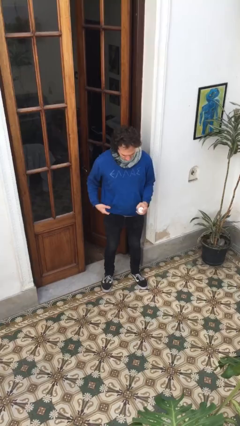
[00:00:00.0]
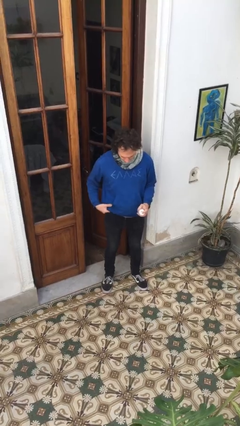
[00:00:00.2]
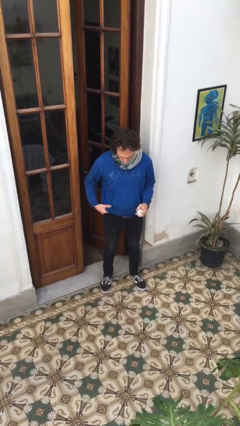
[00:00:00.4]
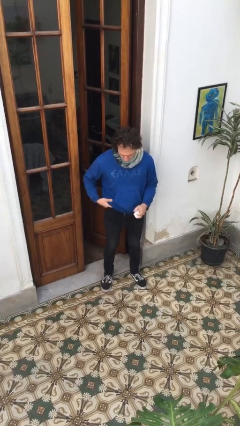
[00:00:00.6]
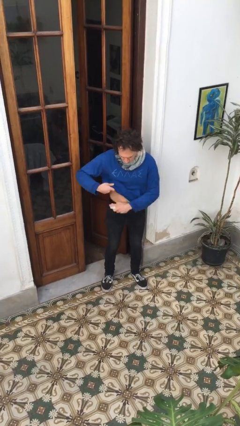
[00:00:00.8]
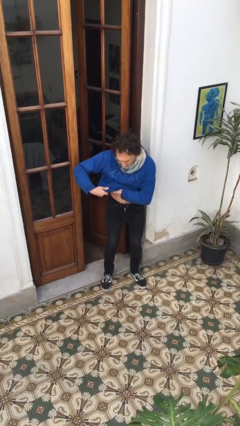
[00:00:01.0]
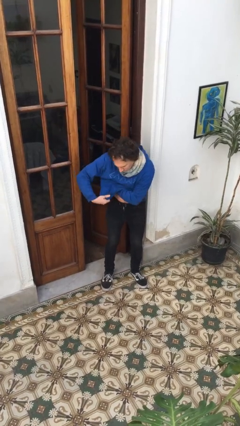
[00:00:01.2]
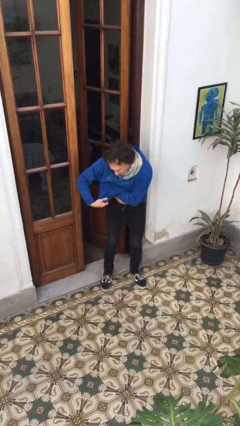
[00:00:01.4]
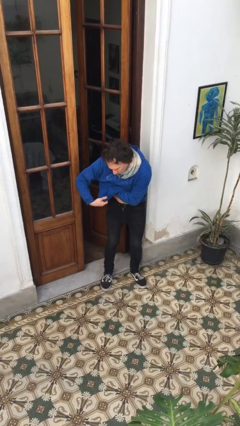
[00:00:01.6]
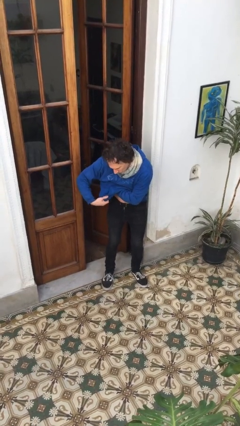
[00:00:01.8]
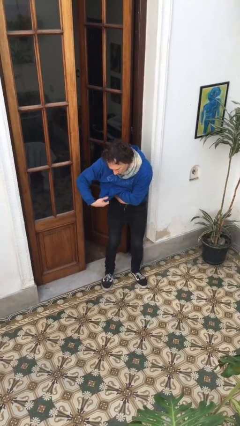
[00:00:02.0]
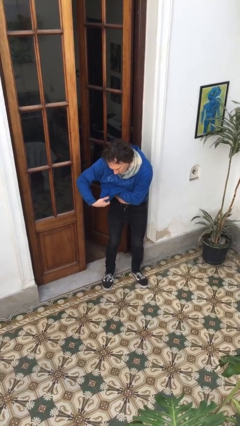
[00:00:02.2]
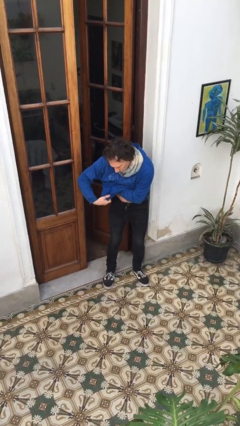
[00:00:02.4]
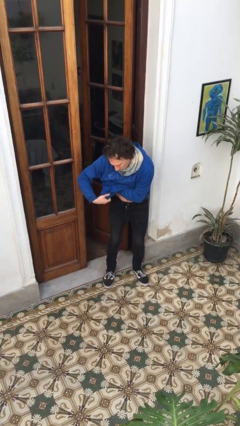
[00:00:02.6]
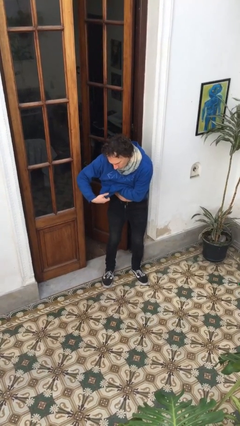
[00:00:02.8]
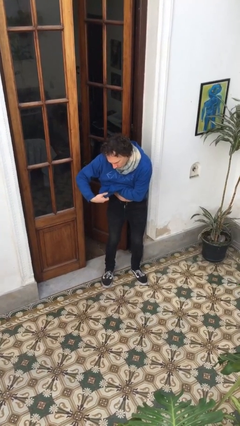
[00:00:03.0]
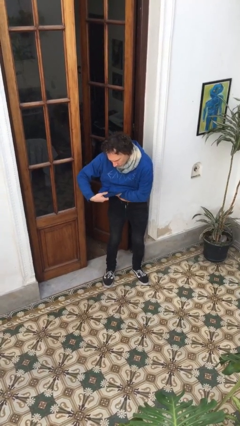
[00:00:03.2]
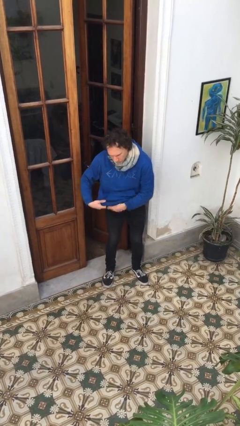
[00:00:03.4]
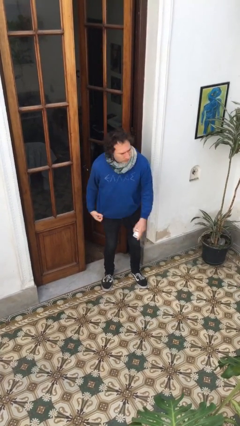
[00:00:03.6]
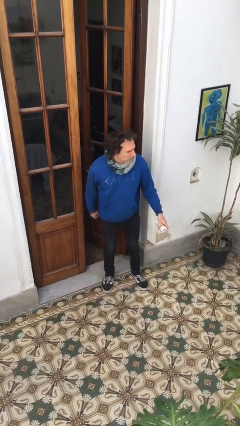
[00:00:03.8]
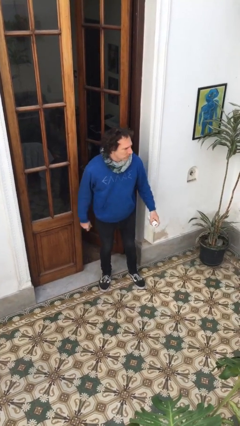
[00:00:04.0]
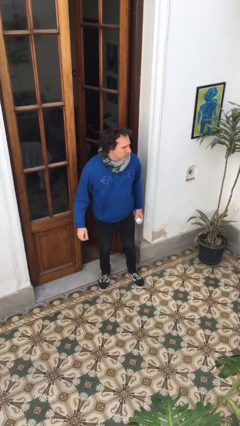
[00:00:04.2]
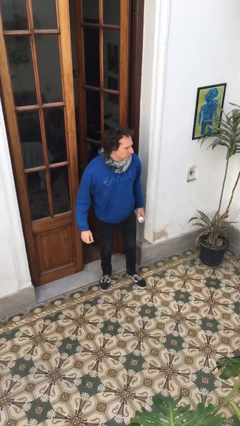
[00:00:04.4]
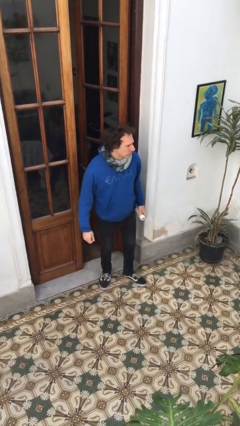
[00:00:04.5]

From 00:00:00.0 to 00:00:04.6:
person applies deodorant

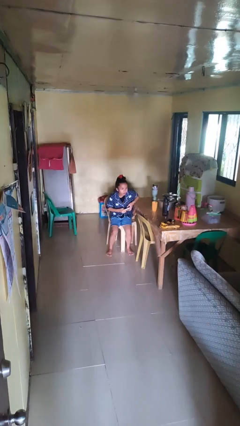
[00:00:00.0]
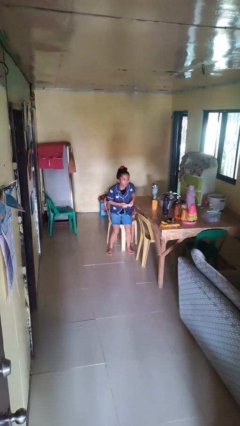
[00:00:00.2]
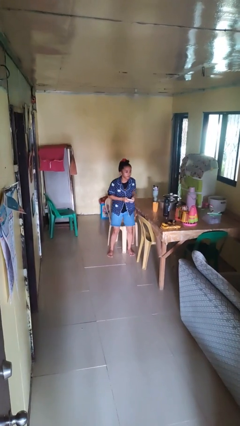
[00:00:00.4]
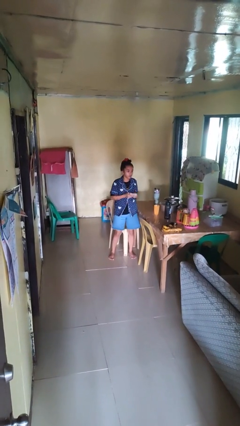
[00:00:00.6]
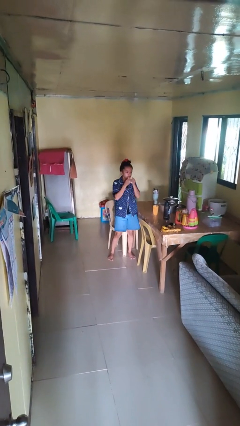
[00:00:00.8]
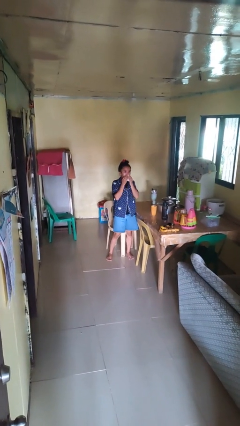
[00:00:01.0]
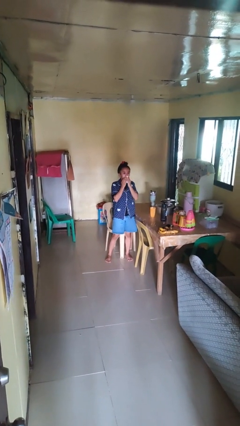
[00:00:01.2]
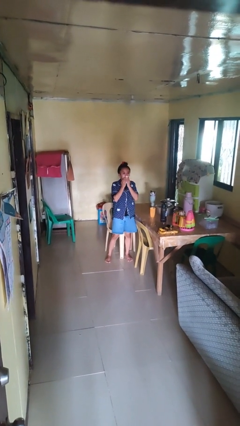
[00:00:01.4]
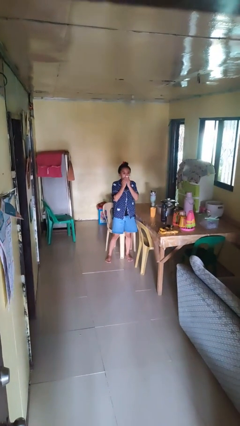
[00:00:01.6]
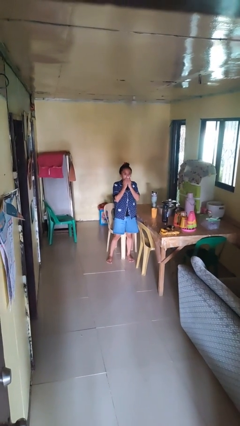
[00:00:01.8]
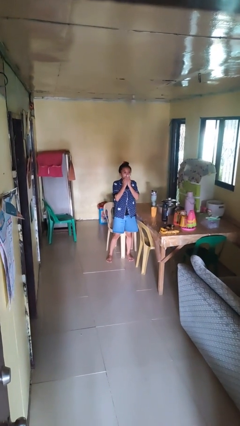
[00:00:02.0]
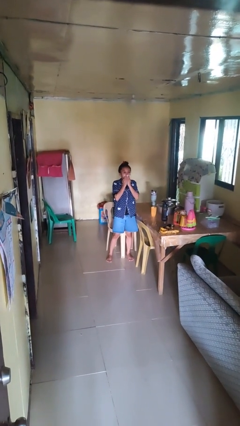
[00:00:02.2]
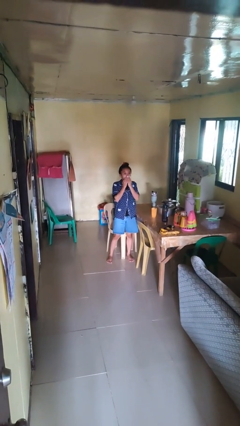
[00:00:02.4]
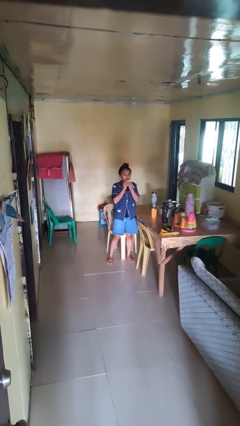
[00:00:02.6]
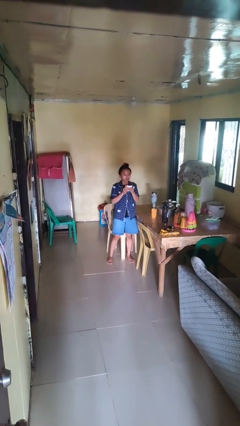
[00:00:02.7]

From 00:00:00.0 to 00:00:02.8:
person wipes mouth with napkin

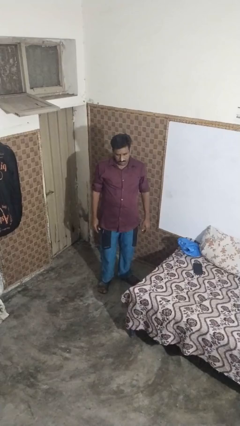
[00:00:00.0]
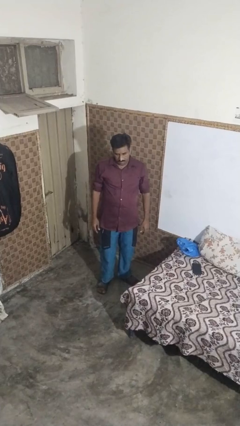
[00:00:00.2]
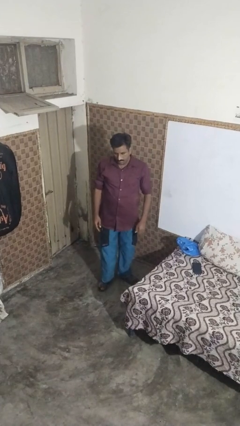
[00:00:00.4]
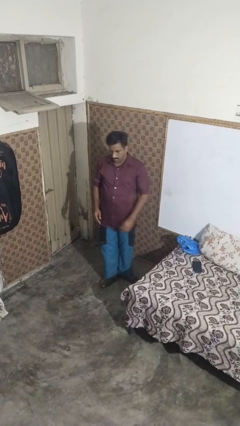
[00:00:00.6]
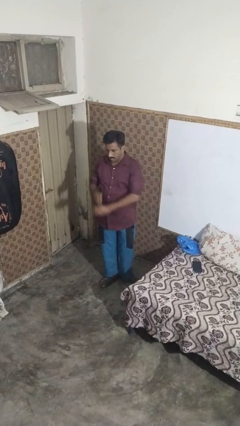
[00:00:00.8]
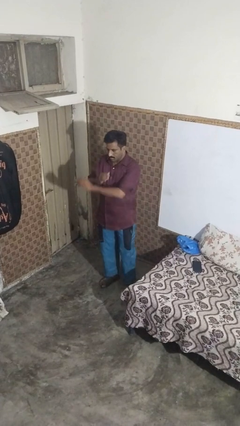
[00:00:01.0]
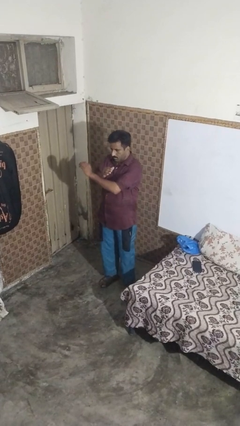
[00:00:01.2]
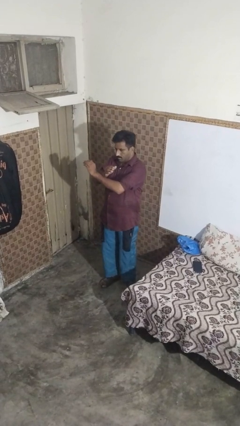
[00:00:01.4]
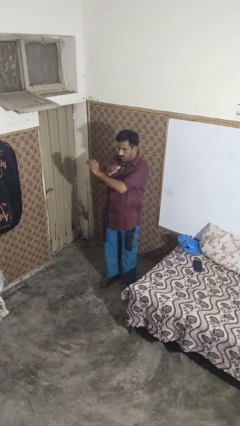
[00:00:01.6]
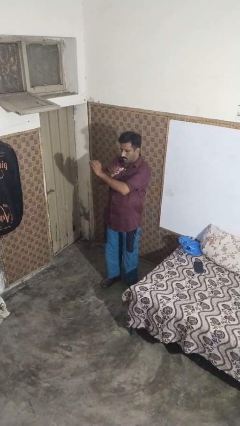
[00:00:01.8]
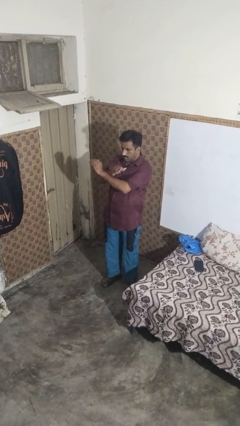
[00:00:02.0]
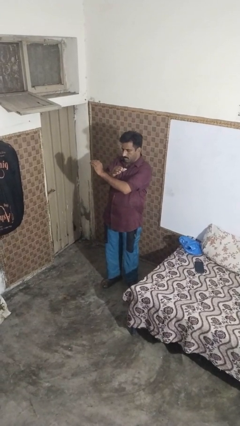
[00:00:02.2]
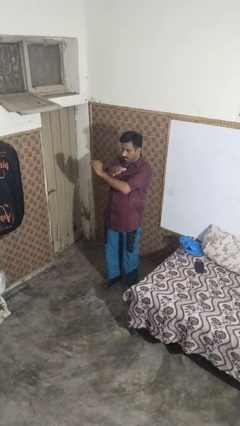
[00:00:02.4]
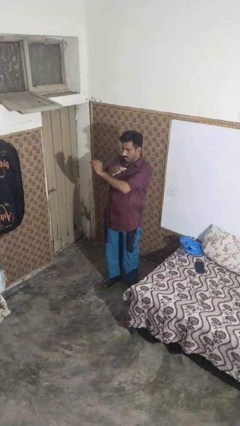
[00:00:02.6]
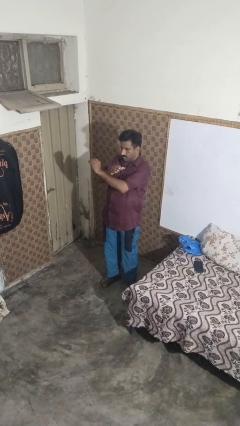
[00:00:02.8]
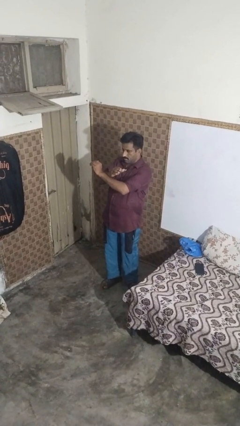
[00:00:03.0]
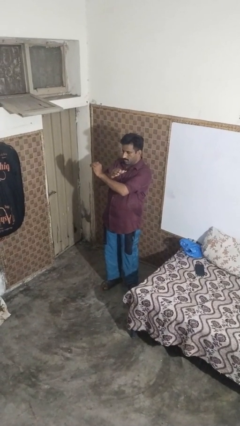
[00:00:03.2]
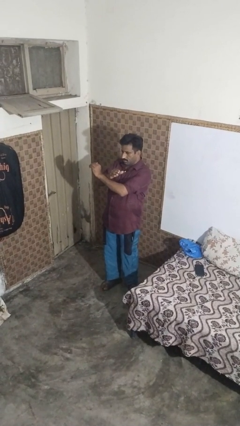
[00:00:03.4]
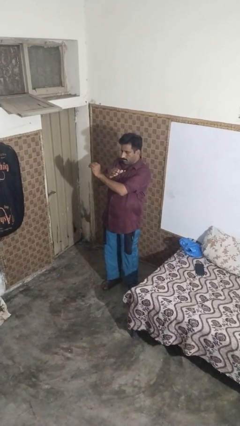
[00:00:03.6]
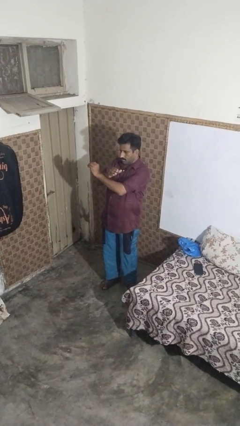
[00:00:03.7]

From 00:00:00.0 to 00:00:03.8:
person gestures arms x

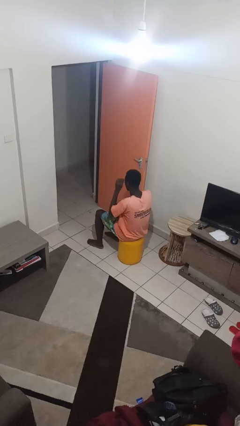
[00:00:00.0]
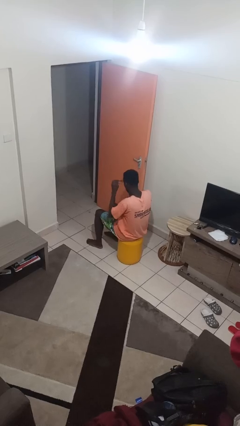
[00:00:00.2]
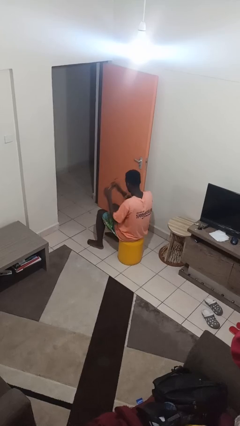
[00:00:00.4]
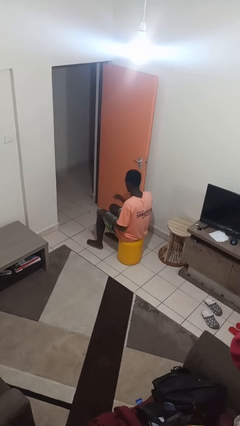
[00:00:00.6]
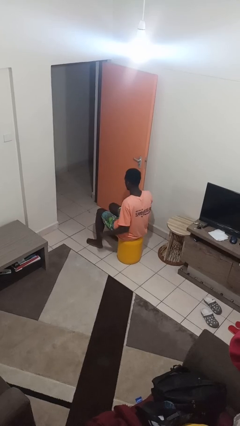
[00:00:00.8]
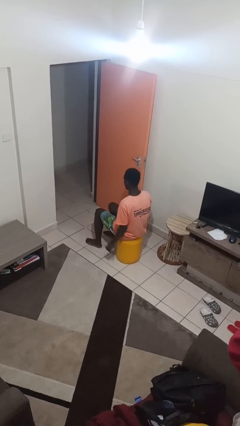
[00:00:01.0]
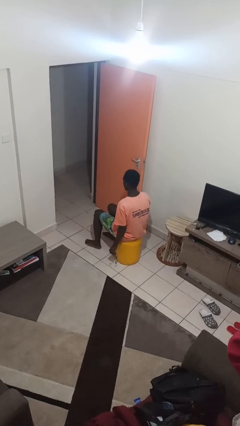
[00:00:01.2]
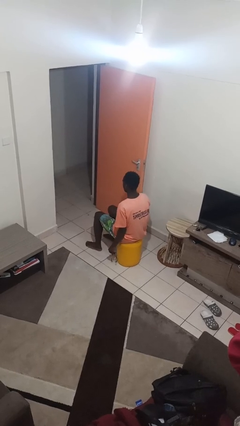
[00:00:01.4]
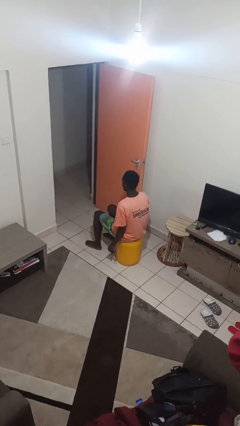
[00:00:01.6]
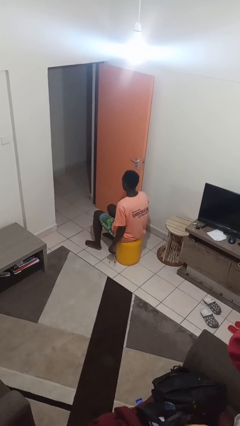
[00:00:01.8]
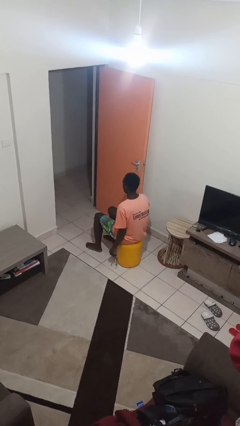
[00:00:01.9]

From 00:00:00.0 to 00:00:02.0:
person takes off glasses

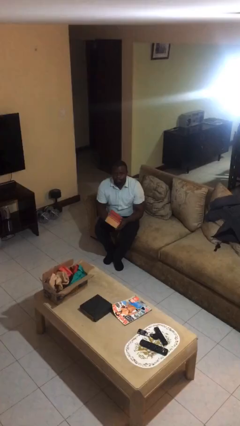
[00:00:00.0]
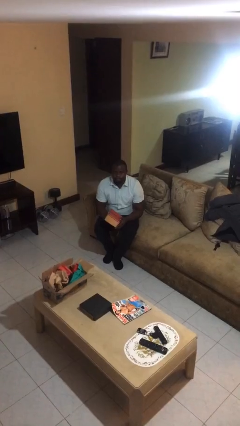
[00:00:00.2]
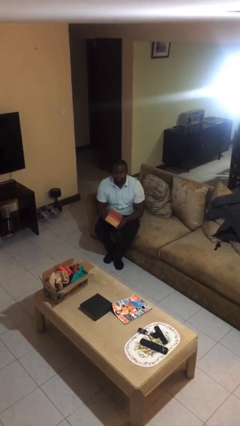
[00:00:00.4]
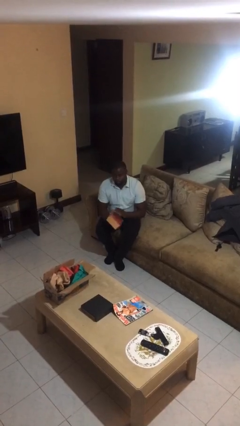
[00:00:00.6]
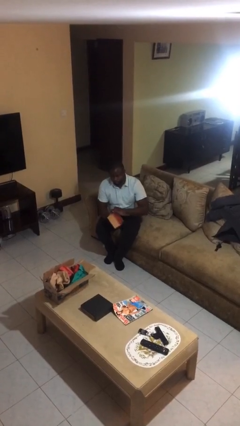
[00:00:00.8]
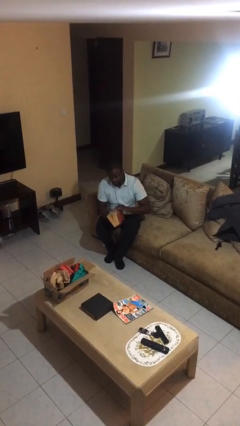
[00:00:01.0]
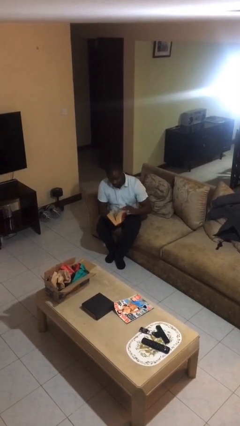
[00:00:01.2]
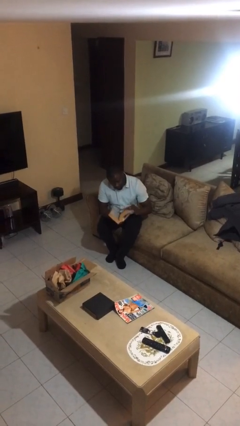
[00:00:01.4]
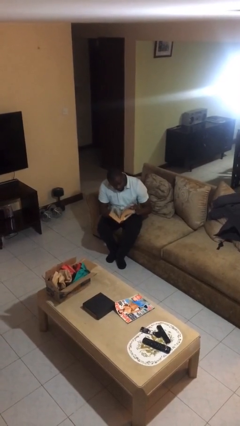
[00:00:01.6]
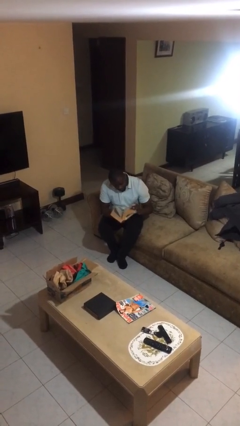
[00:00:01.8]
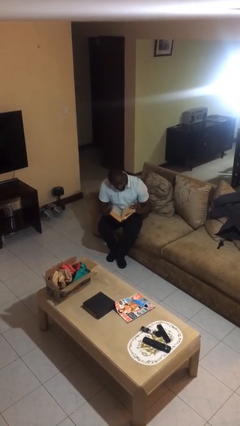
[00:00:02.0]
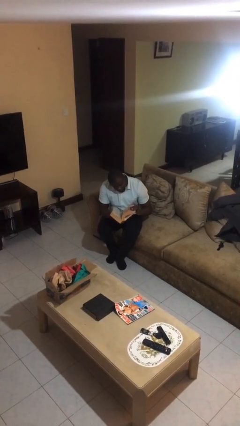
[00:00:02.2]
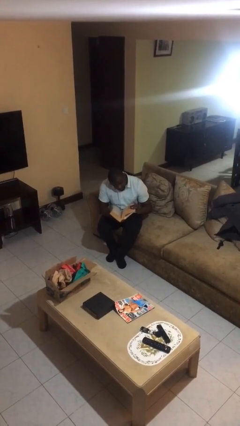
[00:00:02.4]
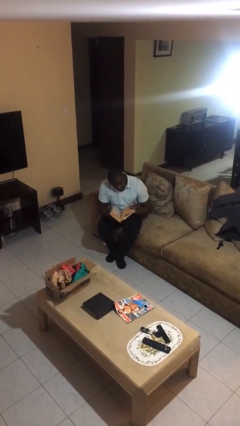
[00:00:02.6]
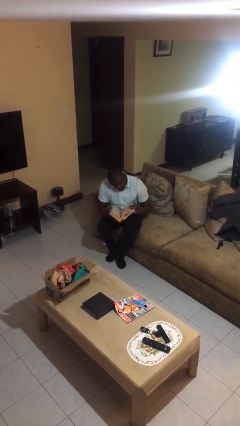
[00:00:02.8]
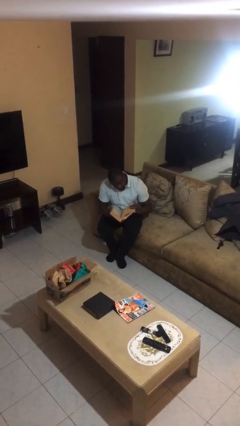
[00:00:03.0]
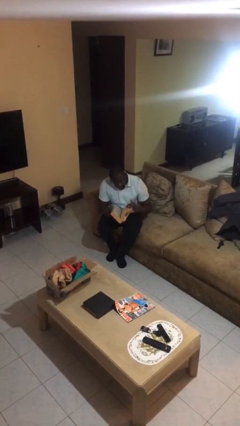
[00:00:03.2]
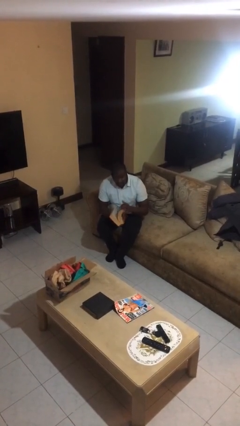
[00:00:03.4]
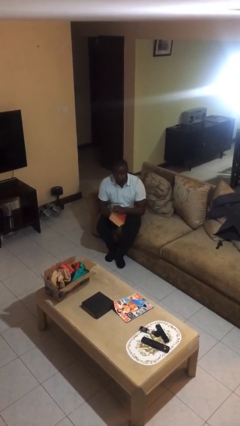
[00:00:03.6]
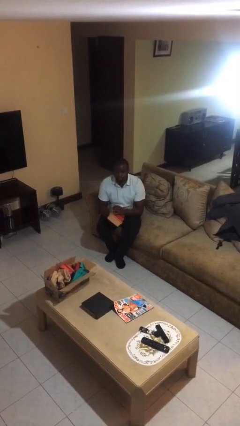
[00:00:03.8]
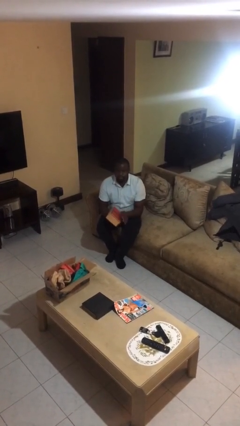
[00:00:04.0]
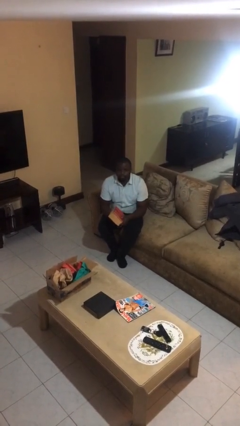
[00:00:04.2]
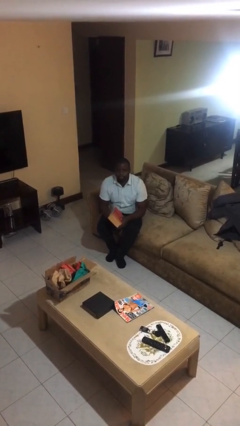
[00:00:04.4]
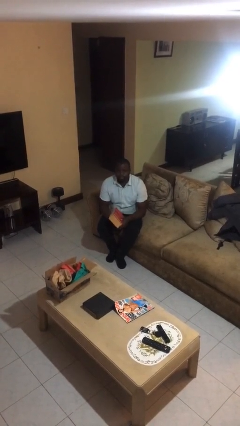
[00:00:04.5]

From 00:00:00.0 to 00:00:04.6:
person reads book
